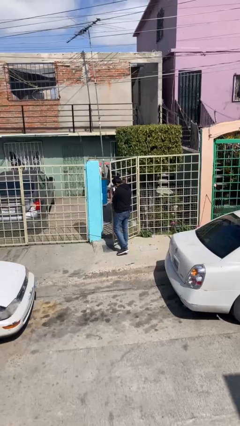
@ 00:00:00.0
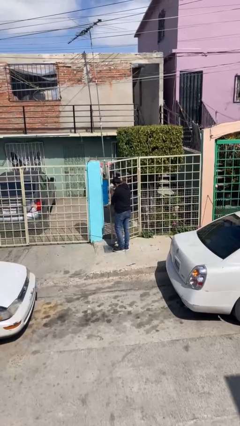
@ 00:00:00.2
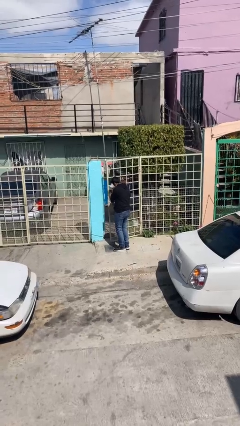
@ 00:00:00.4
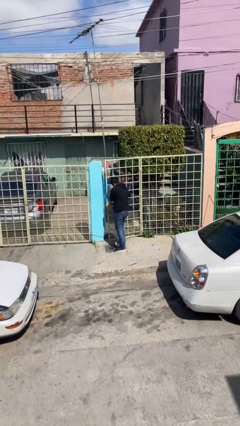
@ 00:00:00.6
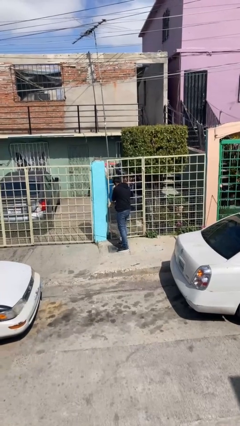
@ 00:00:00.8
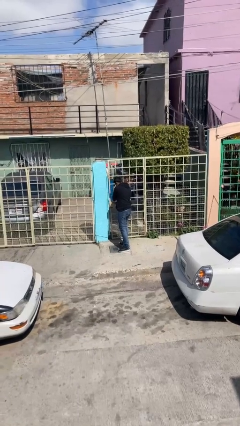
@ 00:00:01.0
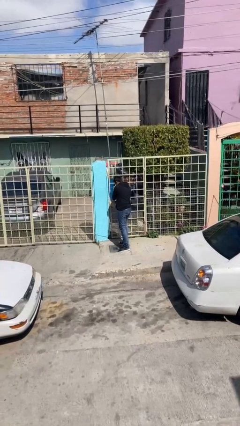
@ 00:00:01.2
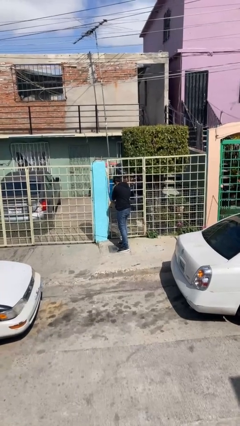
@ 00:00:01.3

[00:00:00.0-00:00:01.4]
person closes facility door

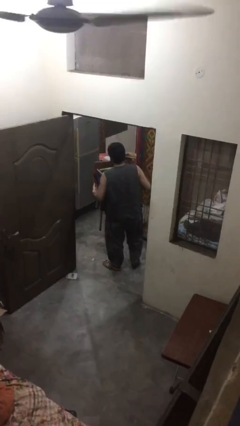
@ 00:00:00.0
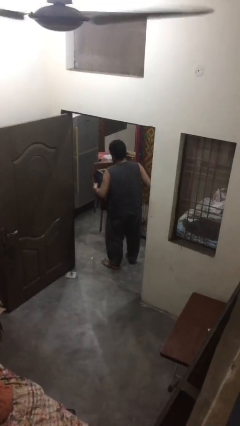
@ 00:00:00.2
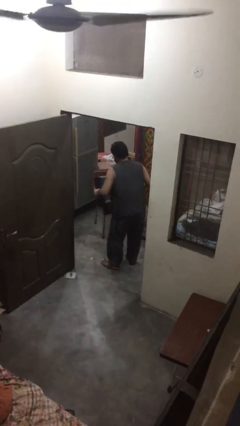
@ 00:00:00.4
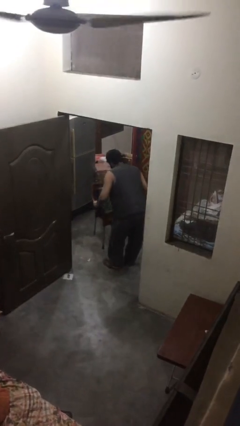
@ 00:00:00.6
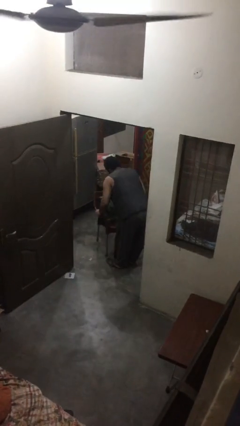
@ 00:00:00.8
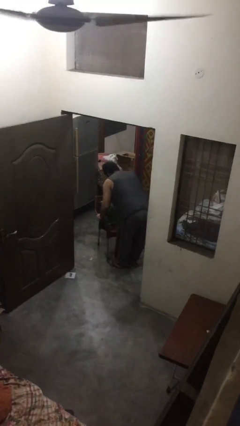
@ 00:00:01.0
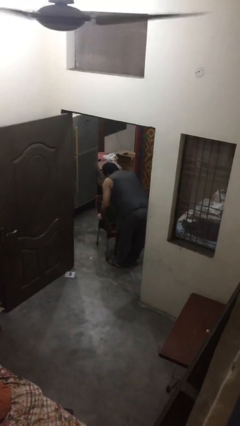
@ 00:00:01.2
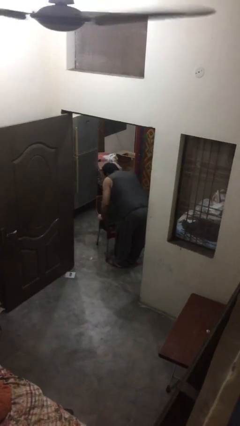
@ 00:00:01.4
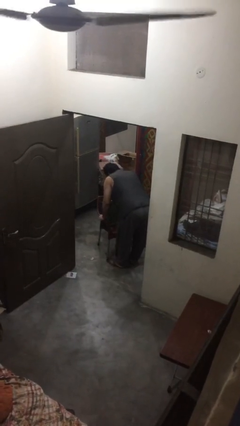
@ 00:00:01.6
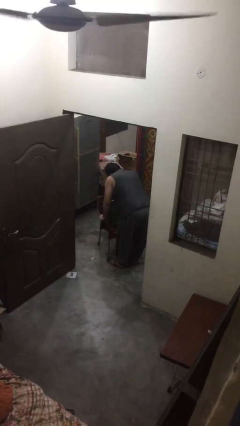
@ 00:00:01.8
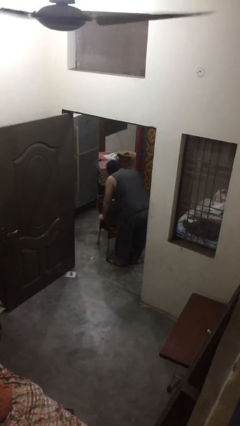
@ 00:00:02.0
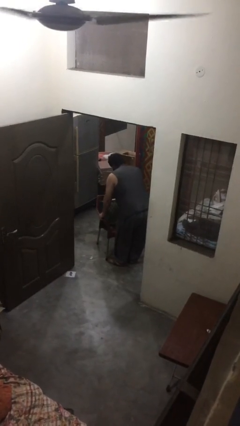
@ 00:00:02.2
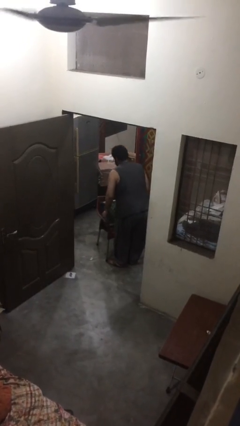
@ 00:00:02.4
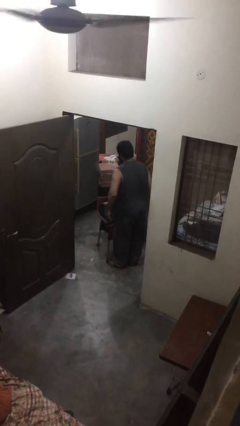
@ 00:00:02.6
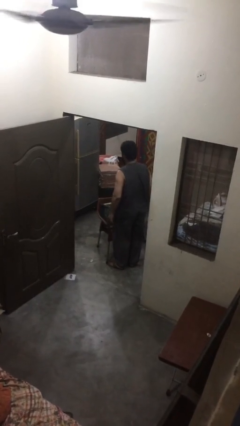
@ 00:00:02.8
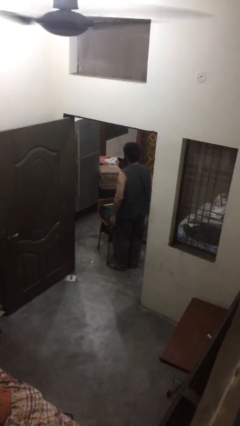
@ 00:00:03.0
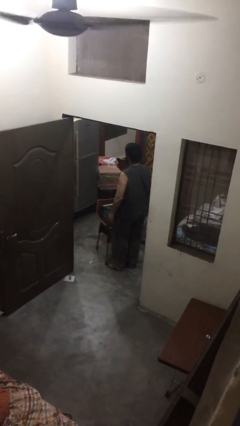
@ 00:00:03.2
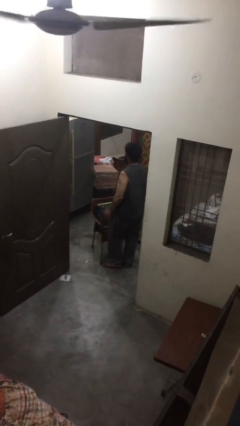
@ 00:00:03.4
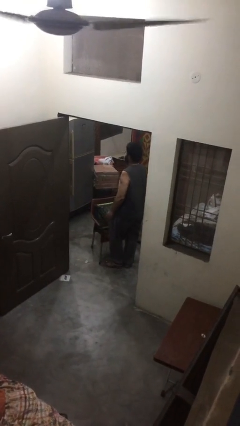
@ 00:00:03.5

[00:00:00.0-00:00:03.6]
person puts down object on floor

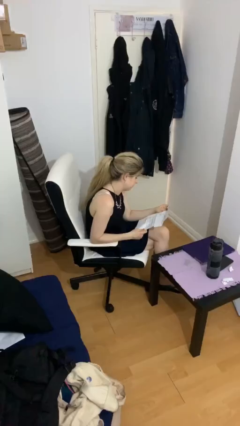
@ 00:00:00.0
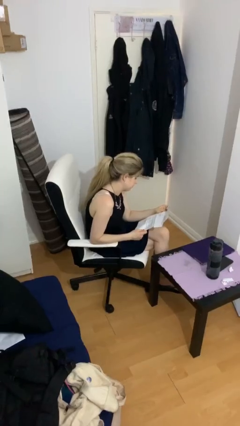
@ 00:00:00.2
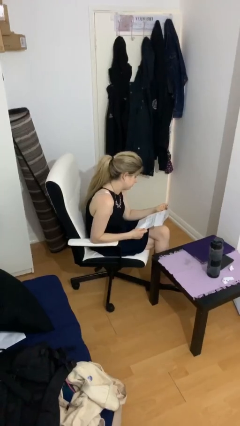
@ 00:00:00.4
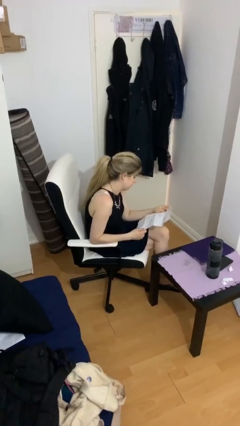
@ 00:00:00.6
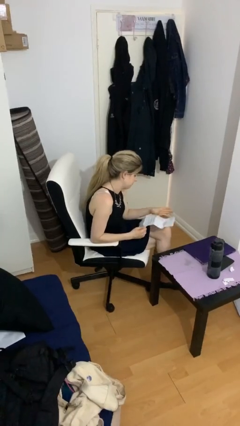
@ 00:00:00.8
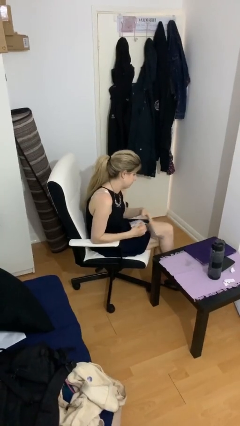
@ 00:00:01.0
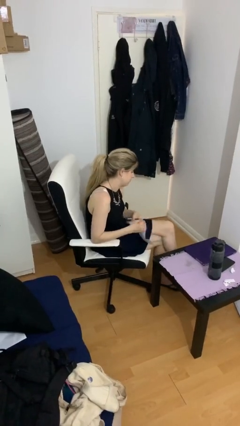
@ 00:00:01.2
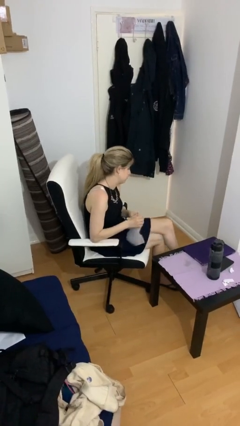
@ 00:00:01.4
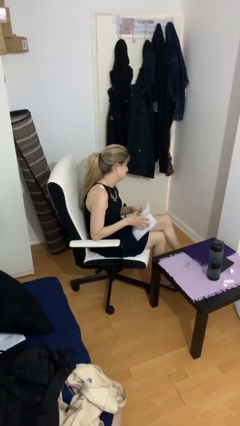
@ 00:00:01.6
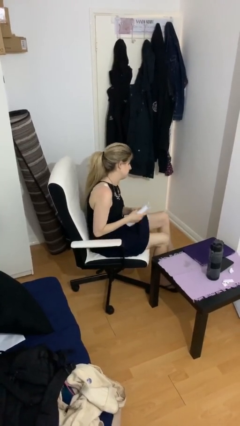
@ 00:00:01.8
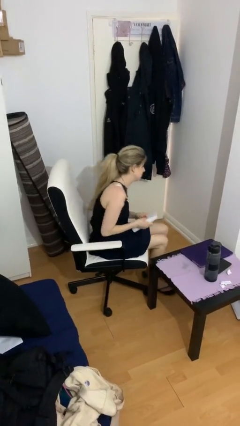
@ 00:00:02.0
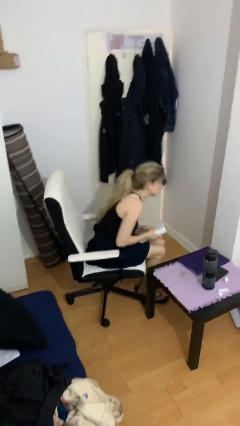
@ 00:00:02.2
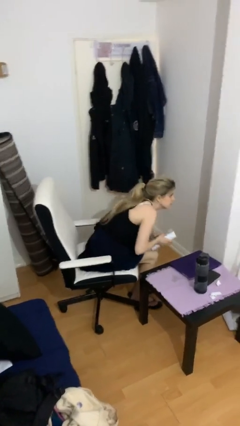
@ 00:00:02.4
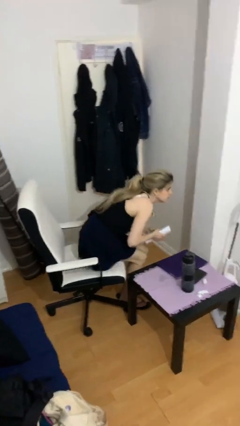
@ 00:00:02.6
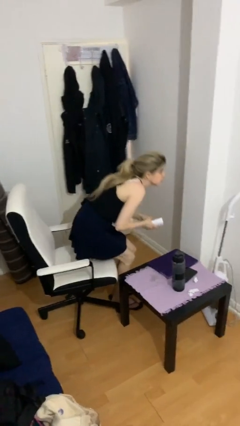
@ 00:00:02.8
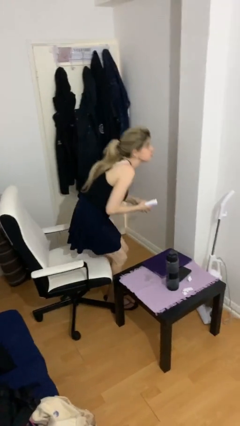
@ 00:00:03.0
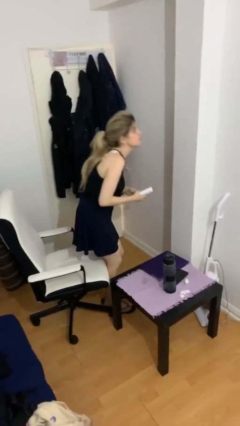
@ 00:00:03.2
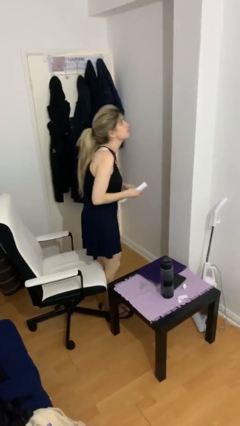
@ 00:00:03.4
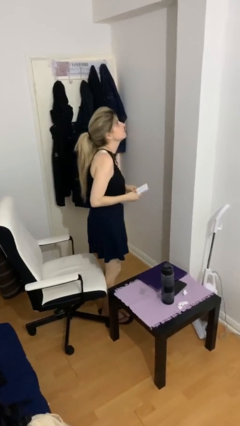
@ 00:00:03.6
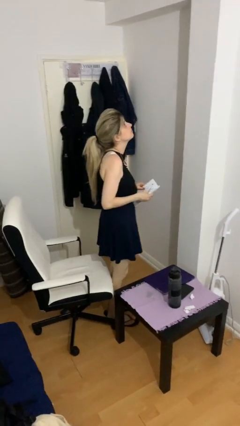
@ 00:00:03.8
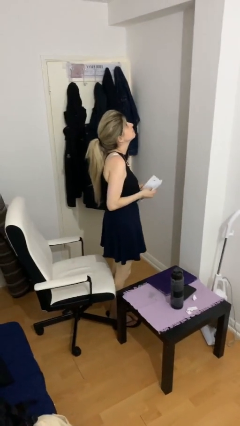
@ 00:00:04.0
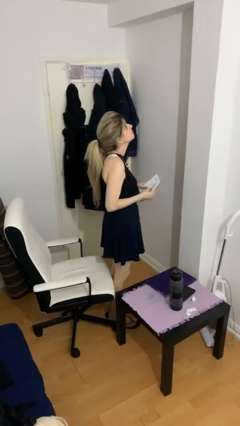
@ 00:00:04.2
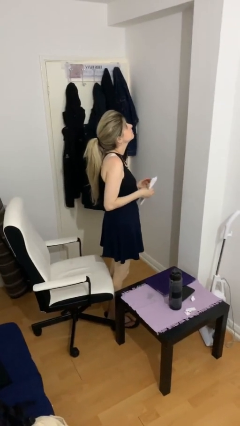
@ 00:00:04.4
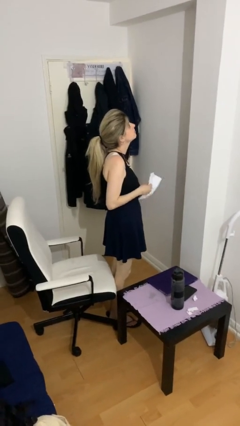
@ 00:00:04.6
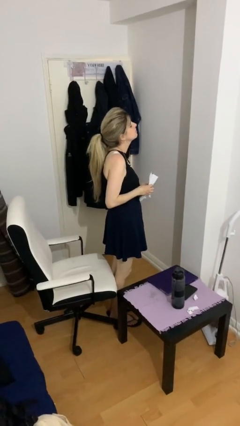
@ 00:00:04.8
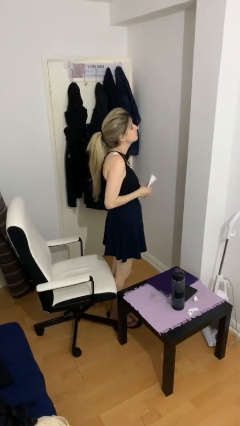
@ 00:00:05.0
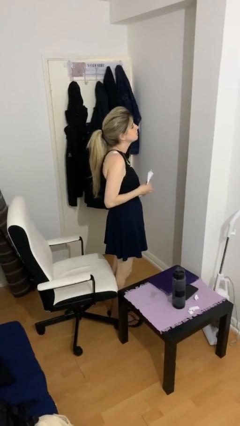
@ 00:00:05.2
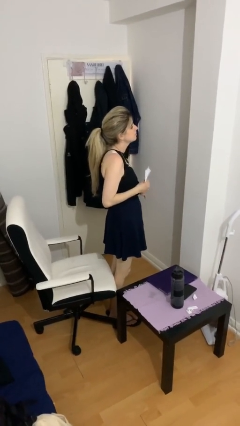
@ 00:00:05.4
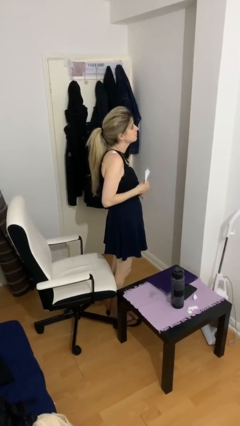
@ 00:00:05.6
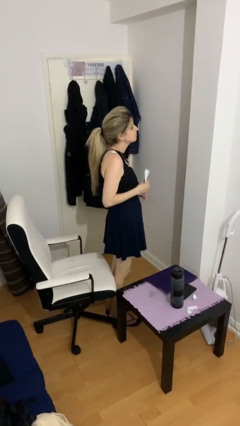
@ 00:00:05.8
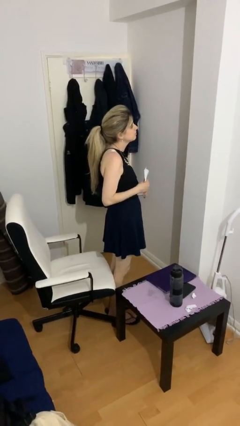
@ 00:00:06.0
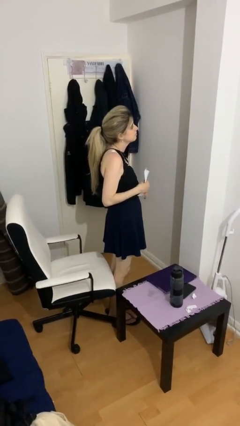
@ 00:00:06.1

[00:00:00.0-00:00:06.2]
person stands up

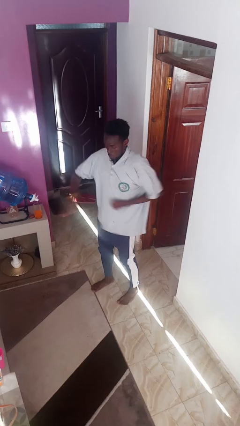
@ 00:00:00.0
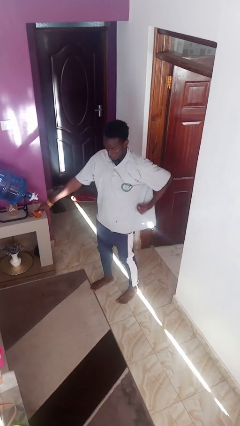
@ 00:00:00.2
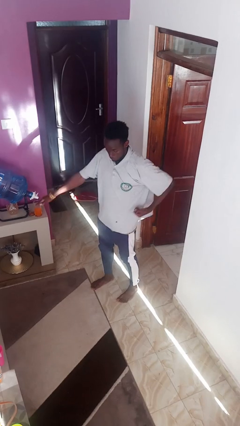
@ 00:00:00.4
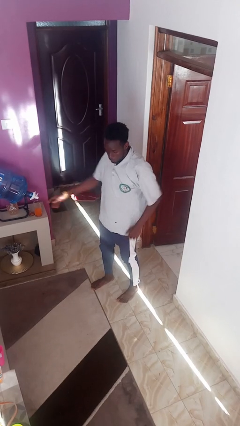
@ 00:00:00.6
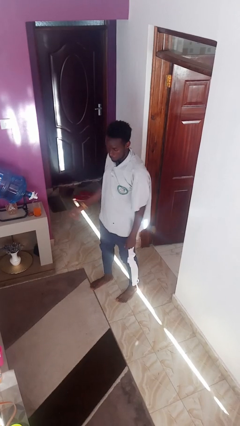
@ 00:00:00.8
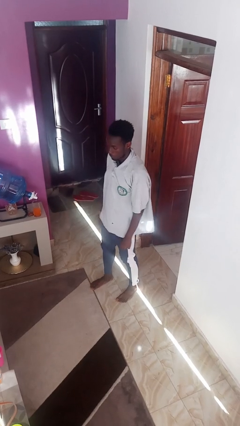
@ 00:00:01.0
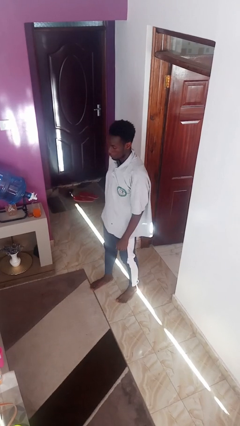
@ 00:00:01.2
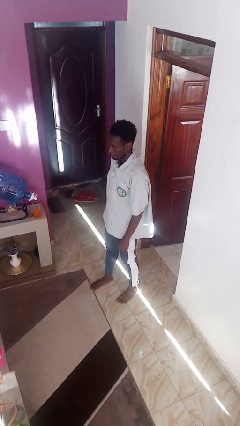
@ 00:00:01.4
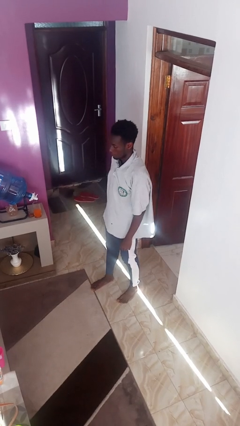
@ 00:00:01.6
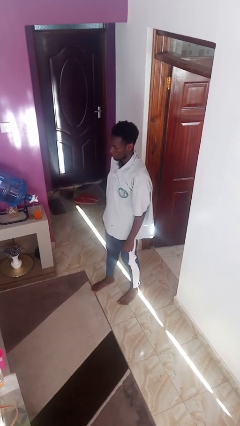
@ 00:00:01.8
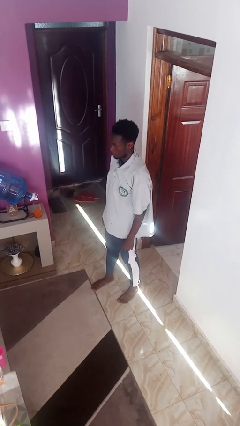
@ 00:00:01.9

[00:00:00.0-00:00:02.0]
person karate chop

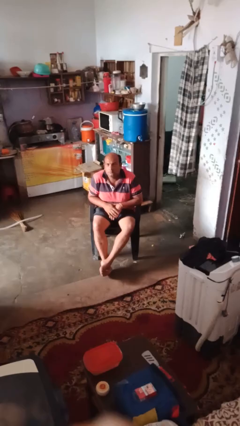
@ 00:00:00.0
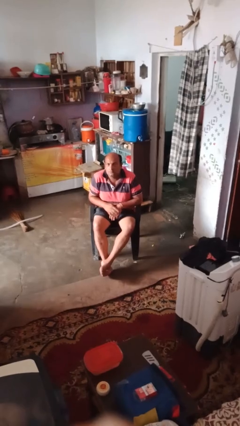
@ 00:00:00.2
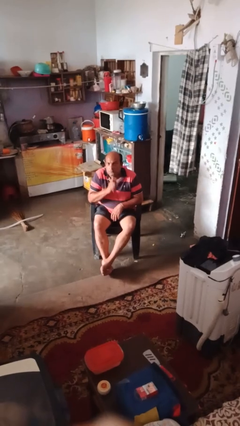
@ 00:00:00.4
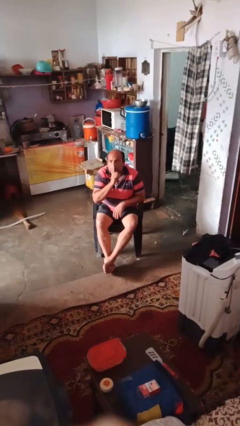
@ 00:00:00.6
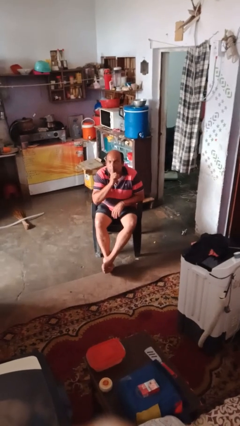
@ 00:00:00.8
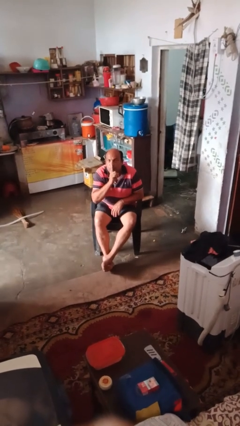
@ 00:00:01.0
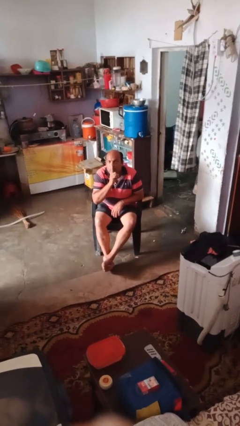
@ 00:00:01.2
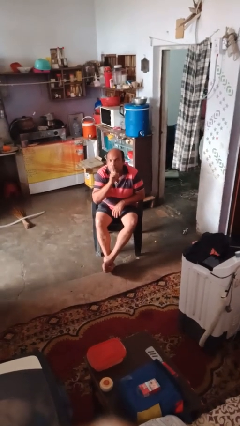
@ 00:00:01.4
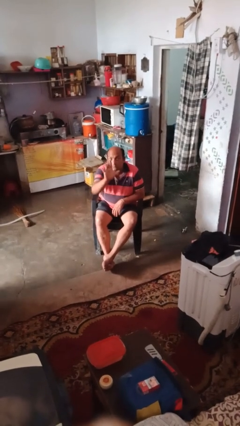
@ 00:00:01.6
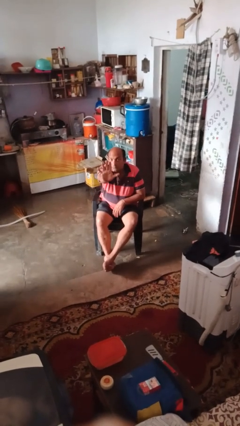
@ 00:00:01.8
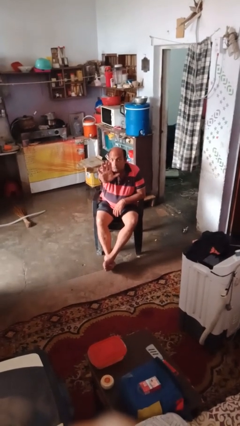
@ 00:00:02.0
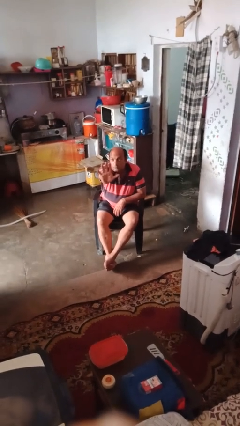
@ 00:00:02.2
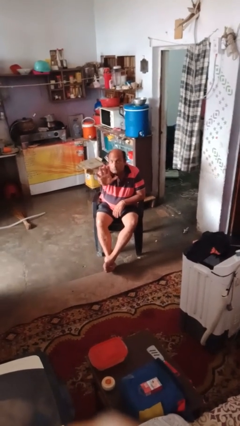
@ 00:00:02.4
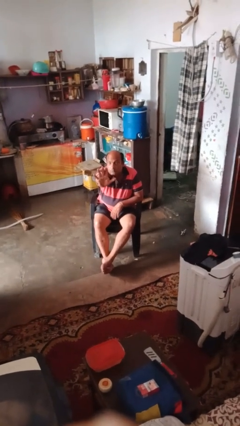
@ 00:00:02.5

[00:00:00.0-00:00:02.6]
person gestures be quiet

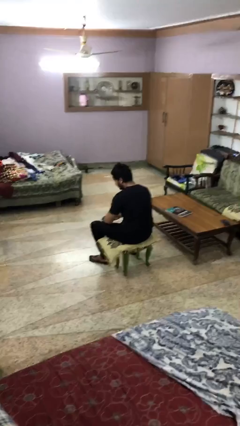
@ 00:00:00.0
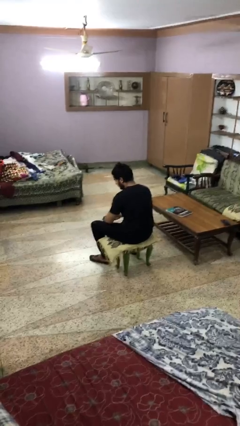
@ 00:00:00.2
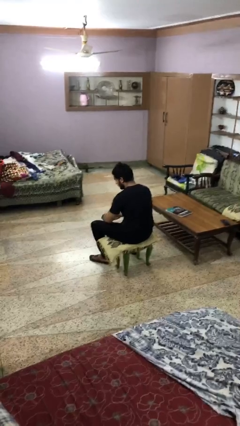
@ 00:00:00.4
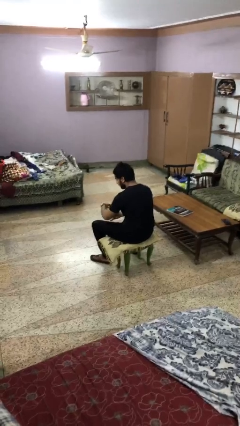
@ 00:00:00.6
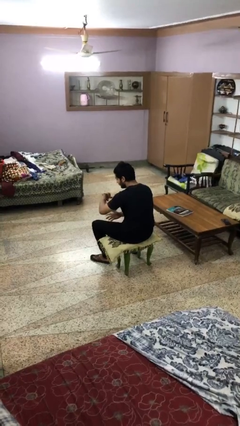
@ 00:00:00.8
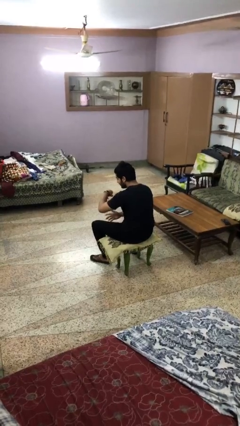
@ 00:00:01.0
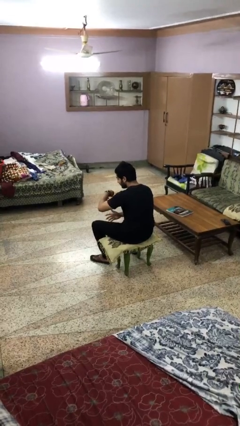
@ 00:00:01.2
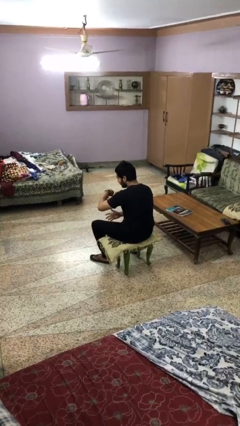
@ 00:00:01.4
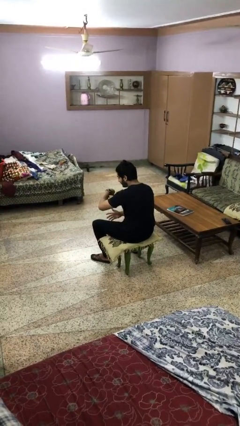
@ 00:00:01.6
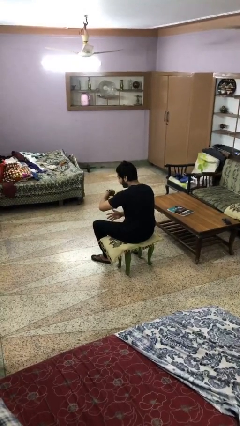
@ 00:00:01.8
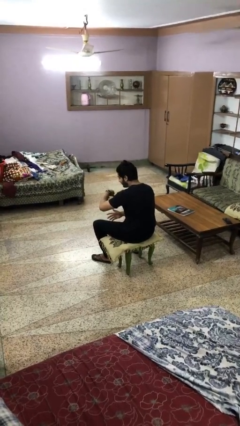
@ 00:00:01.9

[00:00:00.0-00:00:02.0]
person looks at wristwatch
